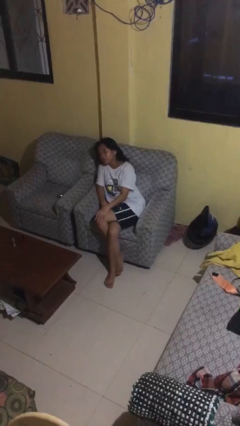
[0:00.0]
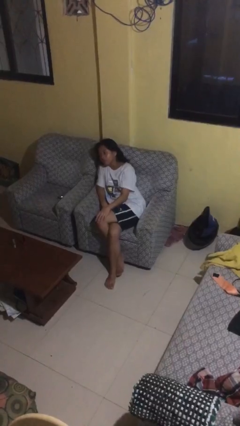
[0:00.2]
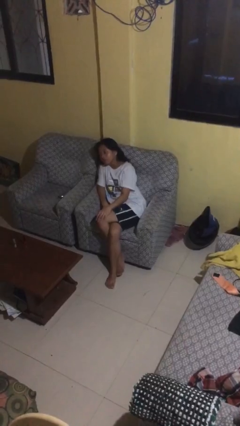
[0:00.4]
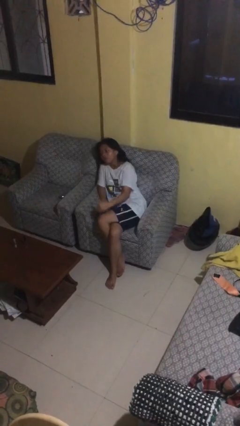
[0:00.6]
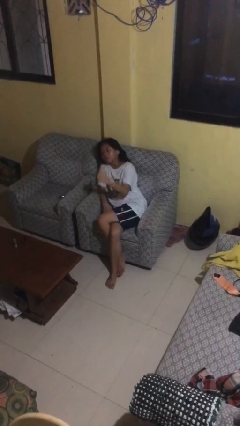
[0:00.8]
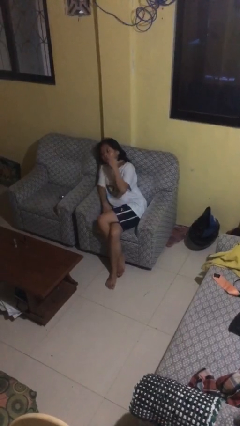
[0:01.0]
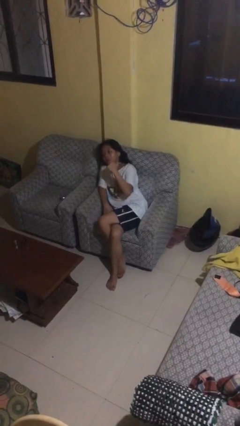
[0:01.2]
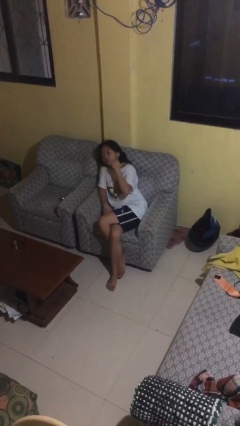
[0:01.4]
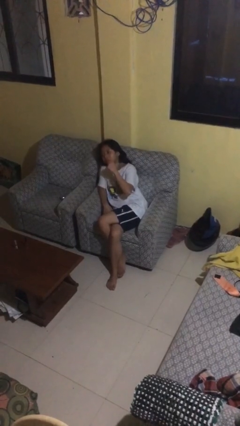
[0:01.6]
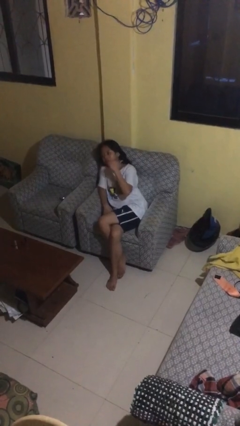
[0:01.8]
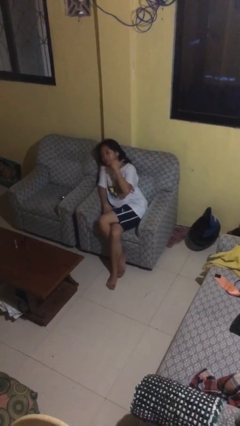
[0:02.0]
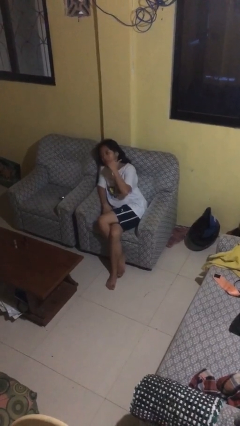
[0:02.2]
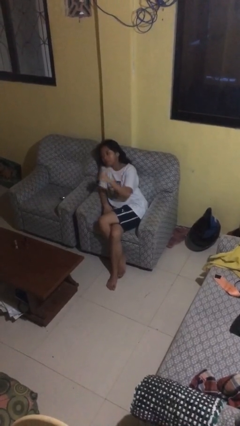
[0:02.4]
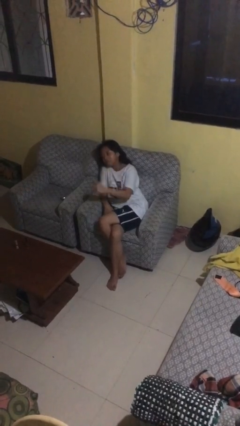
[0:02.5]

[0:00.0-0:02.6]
person gestures behind me

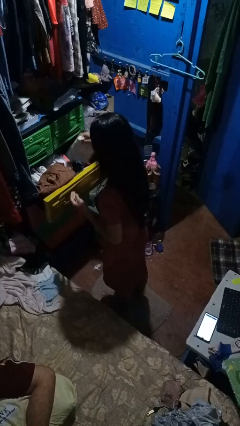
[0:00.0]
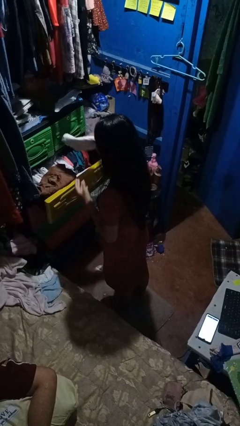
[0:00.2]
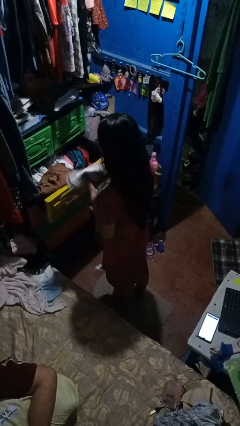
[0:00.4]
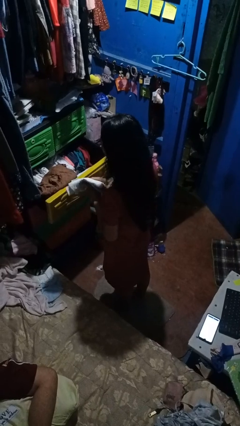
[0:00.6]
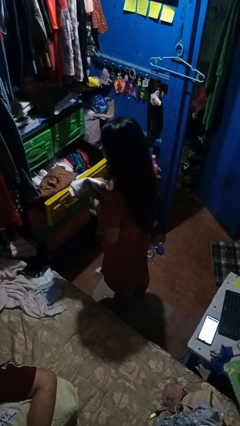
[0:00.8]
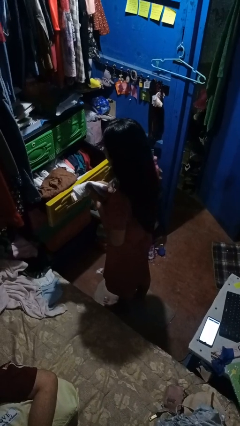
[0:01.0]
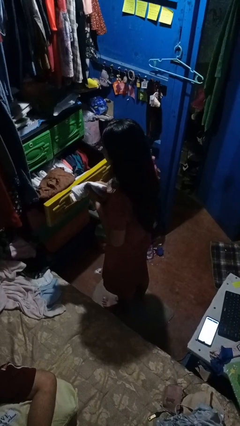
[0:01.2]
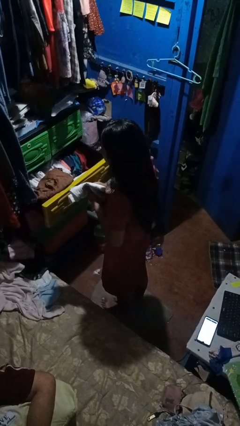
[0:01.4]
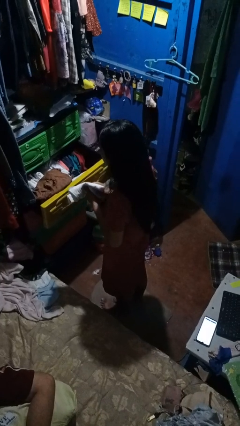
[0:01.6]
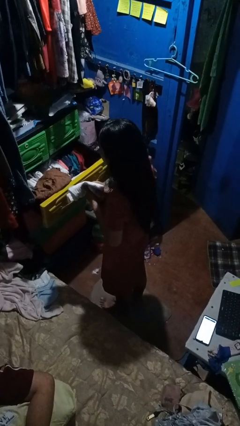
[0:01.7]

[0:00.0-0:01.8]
person takes clothes from dresser

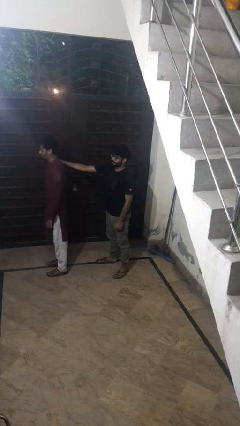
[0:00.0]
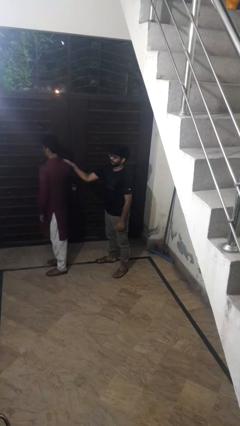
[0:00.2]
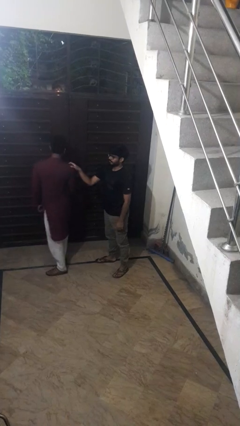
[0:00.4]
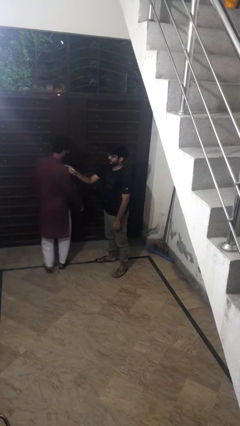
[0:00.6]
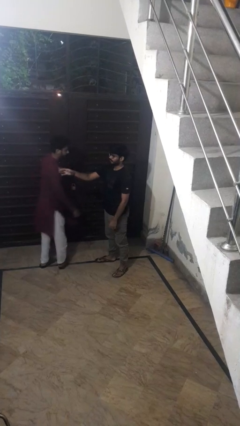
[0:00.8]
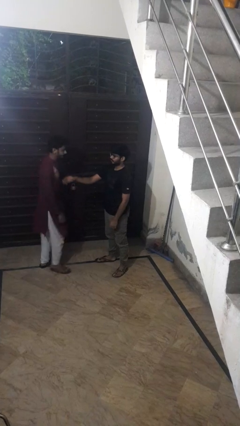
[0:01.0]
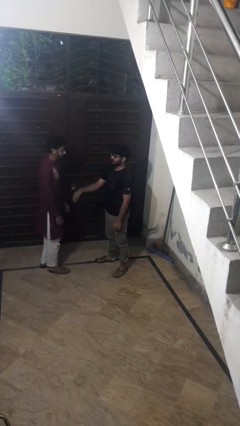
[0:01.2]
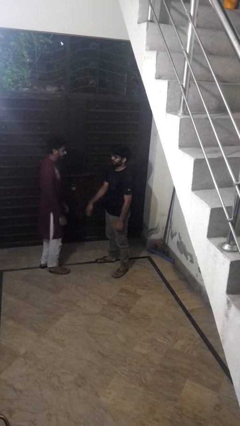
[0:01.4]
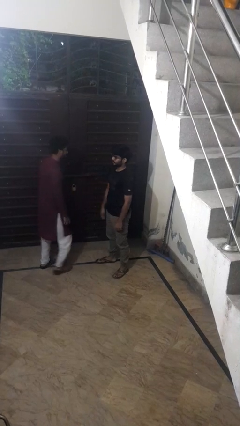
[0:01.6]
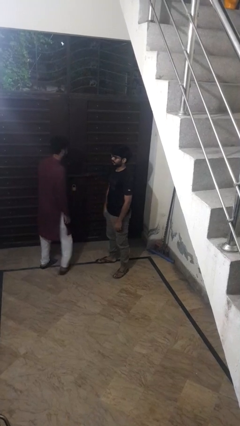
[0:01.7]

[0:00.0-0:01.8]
person spins person around

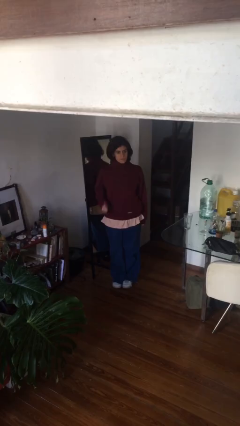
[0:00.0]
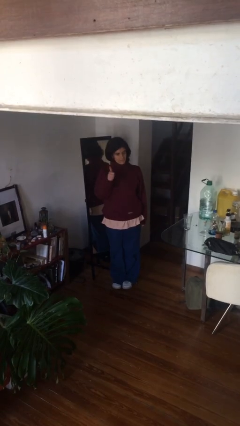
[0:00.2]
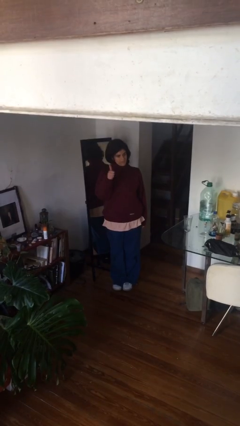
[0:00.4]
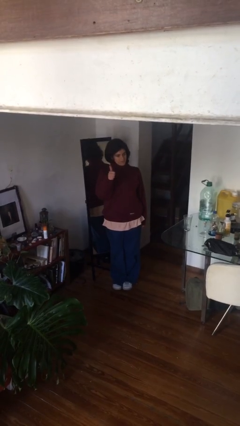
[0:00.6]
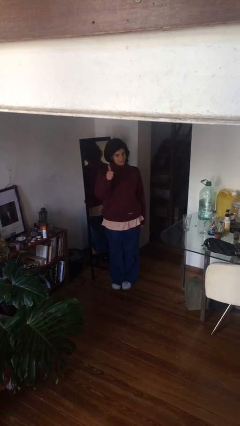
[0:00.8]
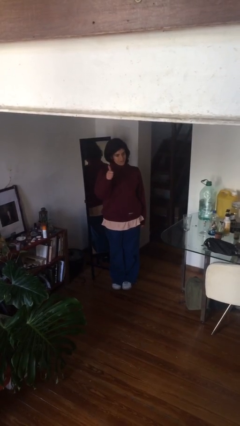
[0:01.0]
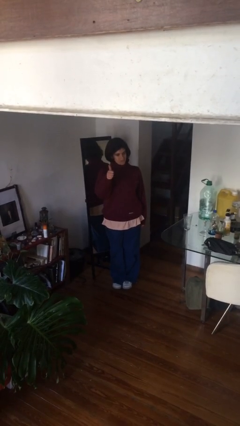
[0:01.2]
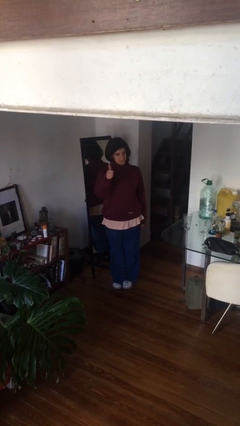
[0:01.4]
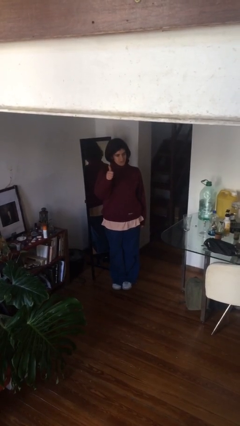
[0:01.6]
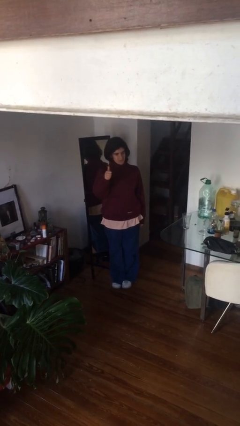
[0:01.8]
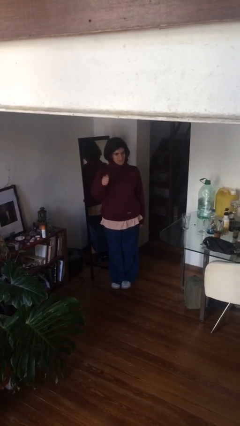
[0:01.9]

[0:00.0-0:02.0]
person gestures thumbs up

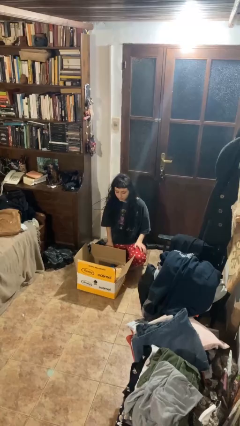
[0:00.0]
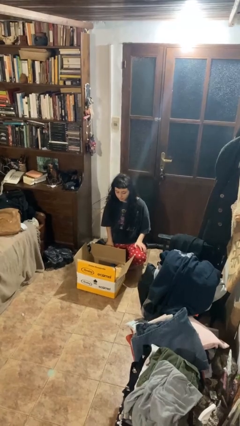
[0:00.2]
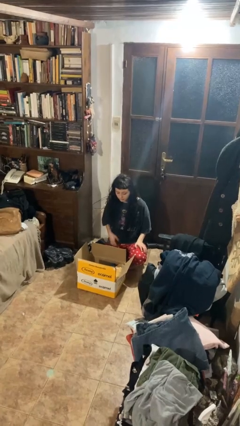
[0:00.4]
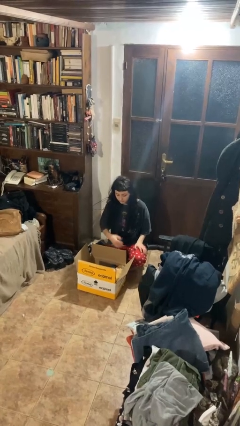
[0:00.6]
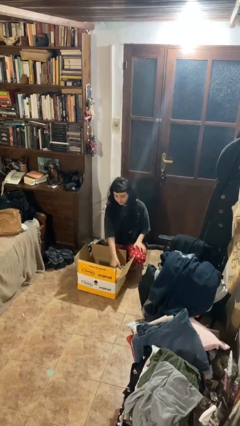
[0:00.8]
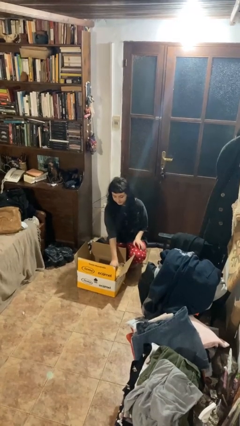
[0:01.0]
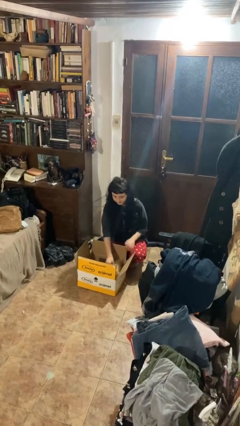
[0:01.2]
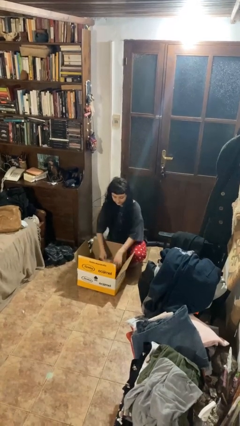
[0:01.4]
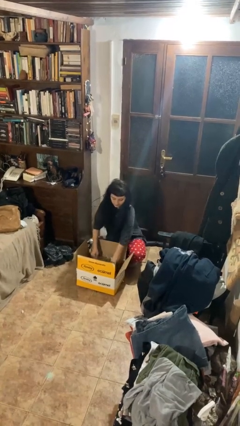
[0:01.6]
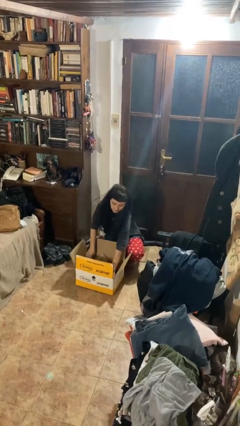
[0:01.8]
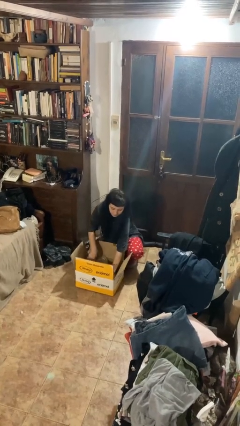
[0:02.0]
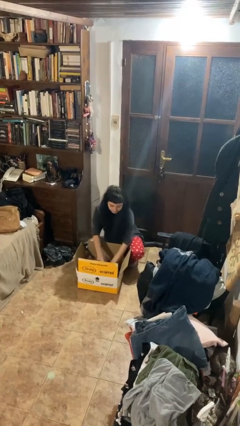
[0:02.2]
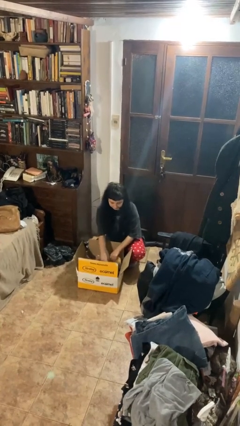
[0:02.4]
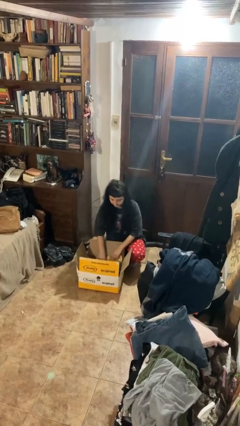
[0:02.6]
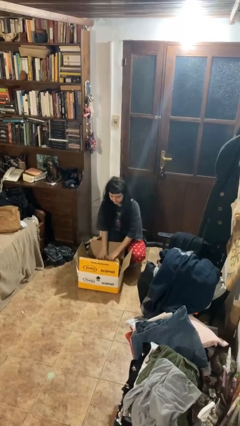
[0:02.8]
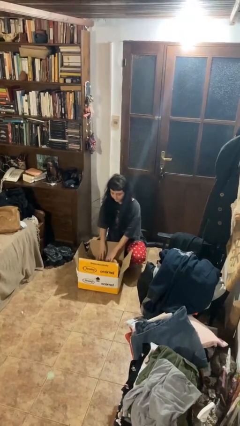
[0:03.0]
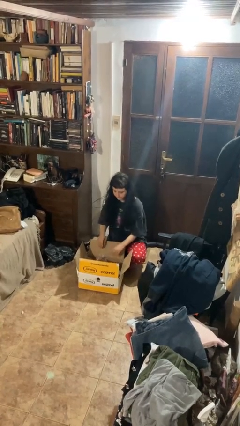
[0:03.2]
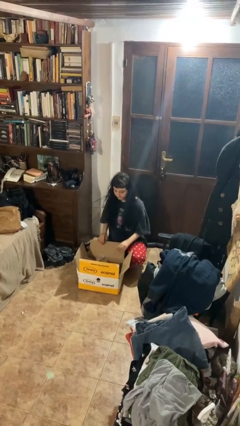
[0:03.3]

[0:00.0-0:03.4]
person searches in box

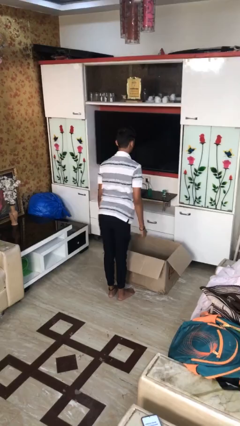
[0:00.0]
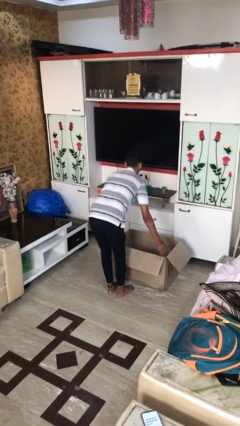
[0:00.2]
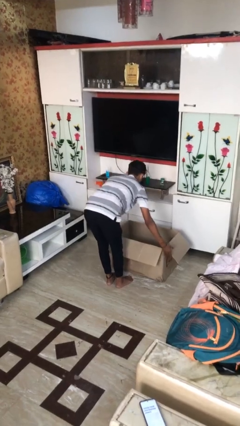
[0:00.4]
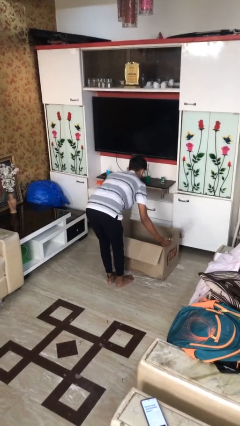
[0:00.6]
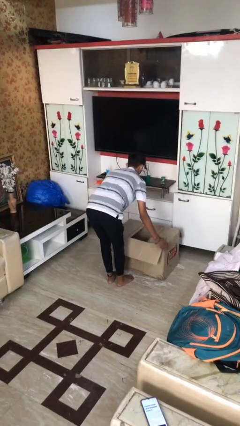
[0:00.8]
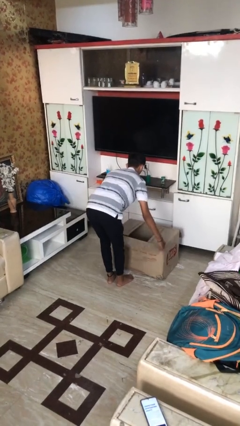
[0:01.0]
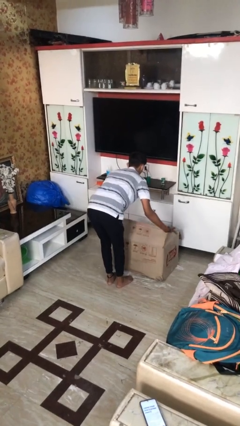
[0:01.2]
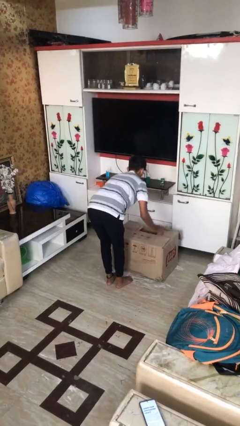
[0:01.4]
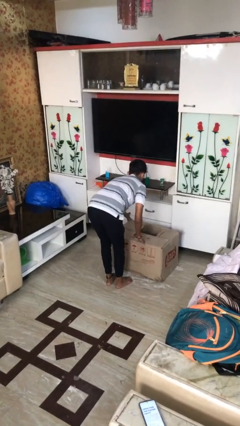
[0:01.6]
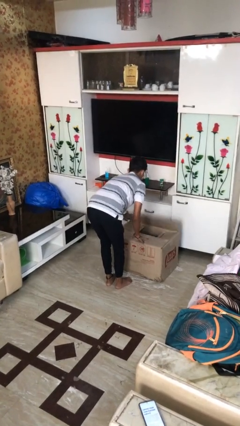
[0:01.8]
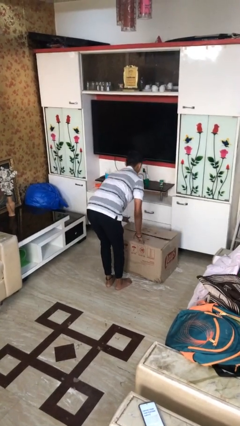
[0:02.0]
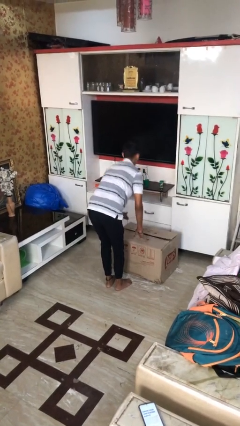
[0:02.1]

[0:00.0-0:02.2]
person closes box

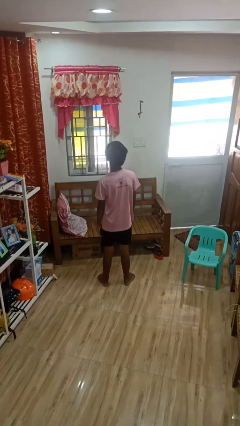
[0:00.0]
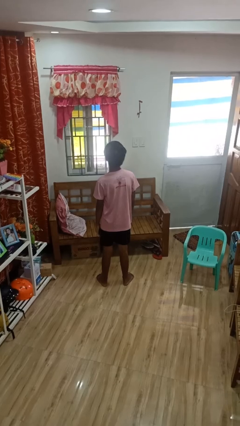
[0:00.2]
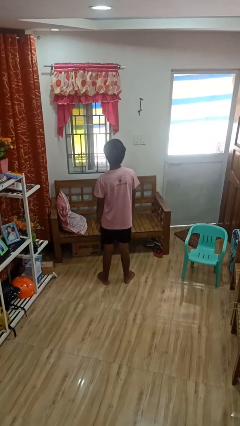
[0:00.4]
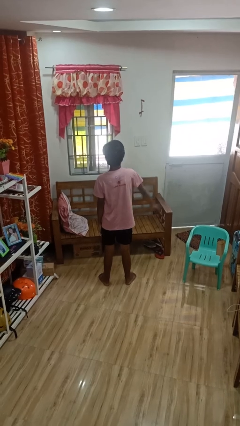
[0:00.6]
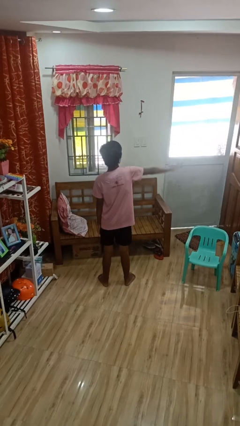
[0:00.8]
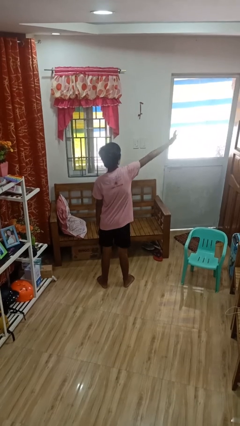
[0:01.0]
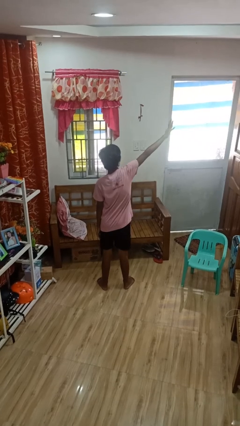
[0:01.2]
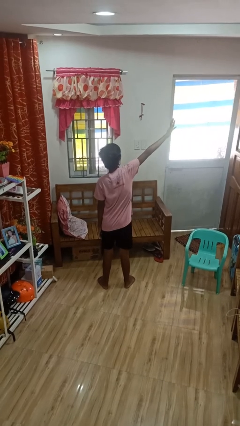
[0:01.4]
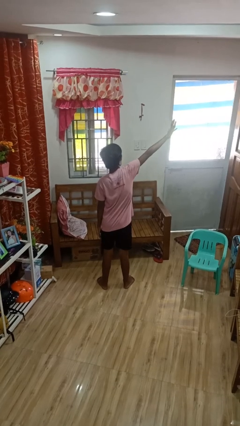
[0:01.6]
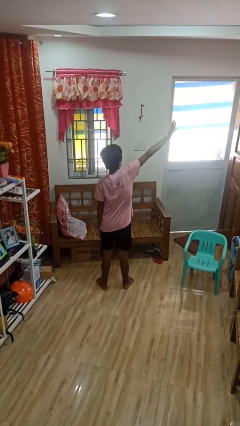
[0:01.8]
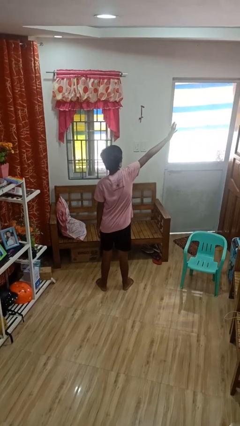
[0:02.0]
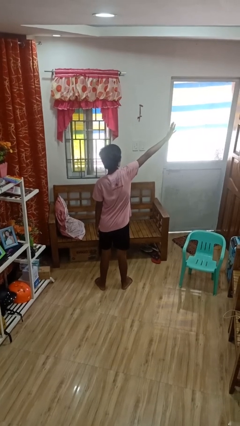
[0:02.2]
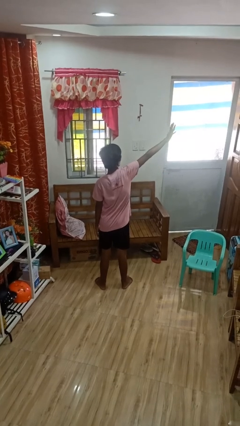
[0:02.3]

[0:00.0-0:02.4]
person gestures stop

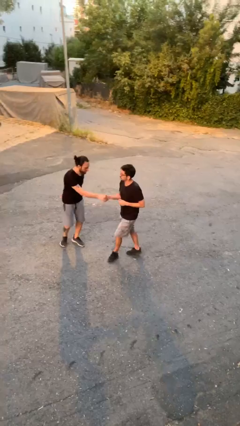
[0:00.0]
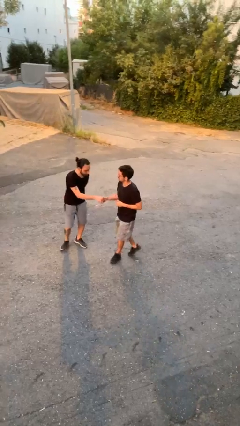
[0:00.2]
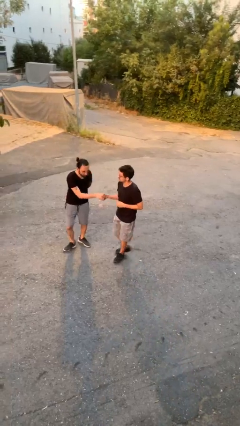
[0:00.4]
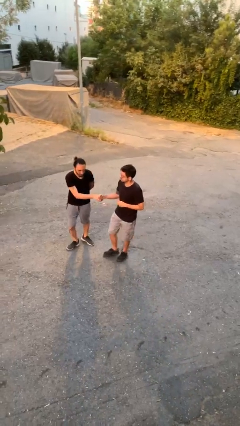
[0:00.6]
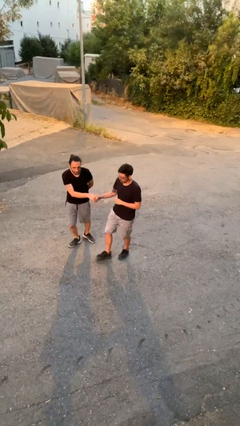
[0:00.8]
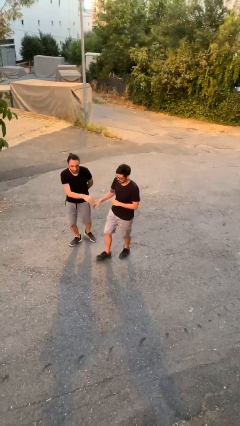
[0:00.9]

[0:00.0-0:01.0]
person shakes hand
